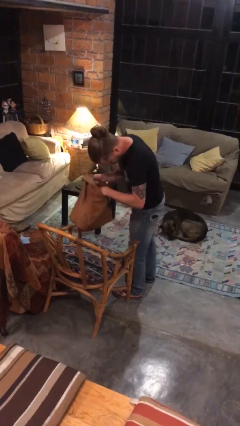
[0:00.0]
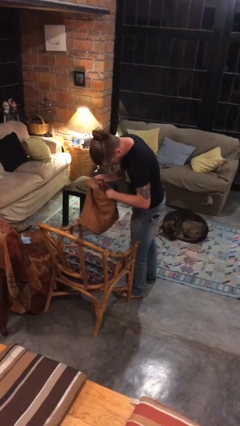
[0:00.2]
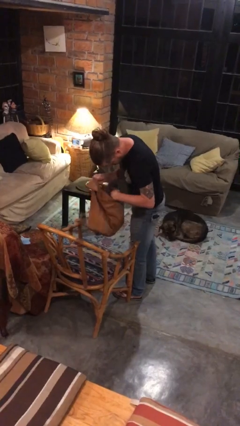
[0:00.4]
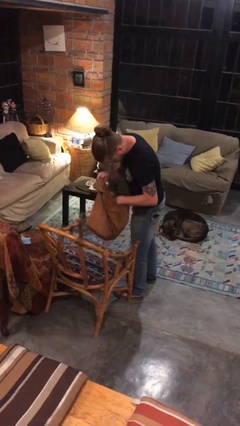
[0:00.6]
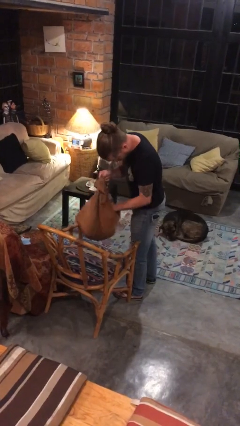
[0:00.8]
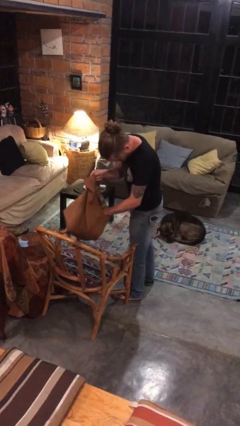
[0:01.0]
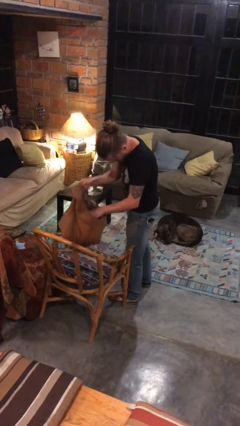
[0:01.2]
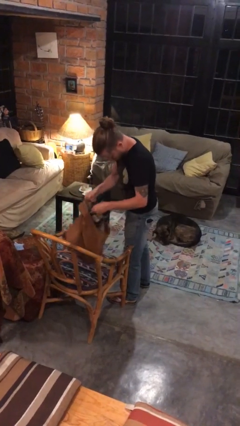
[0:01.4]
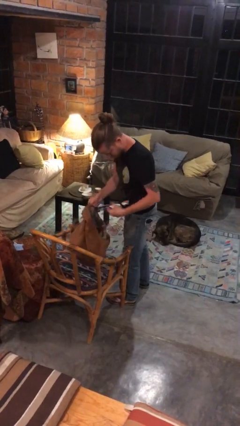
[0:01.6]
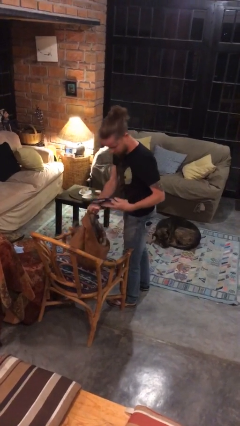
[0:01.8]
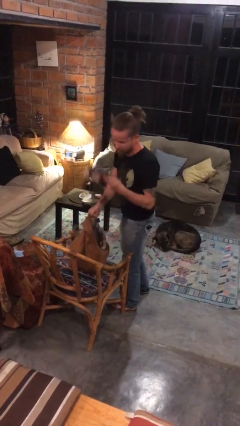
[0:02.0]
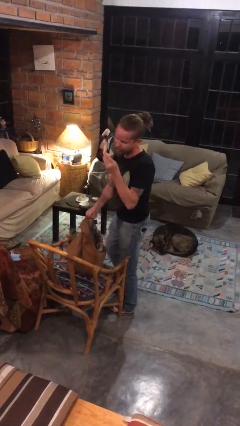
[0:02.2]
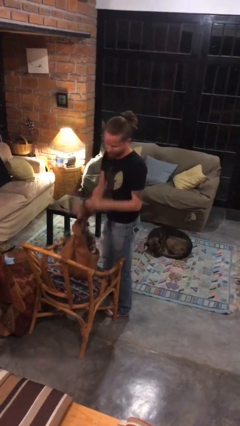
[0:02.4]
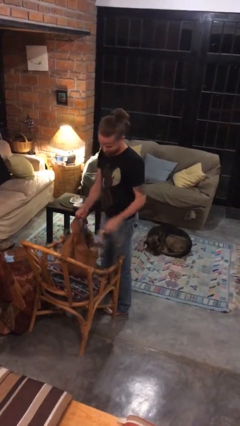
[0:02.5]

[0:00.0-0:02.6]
person takes object from purse

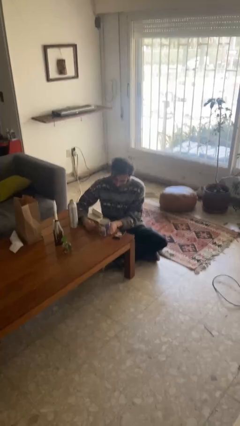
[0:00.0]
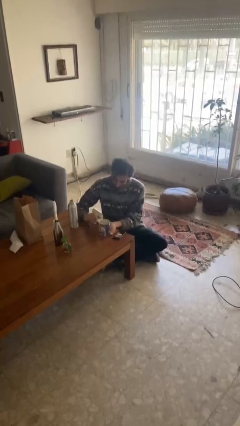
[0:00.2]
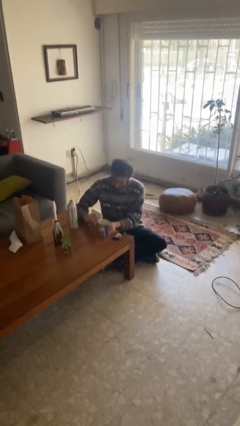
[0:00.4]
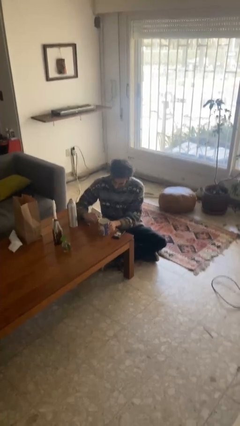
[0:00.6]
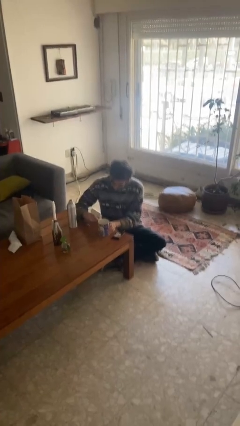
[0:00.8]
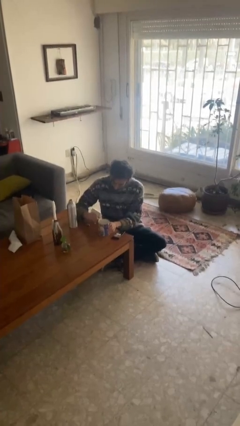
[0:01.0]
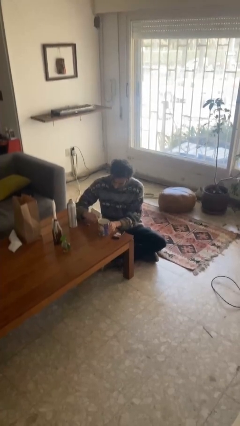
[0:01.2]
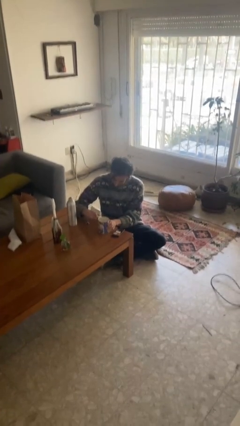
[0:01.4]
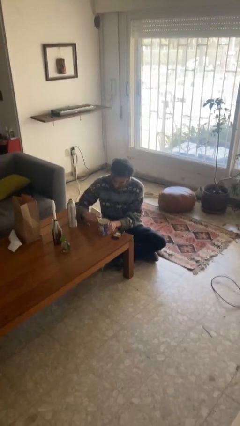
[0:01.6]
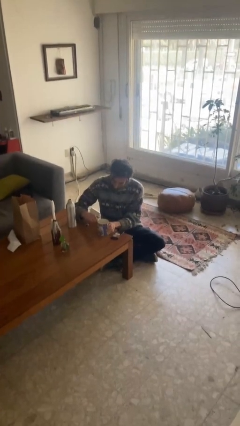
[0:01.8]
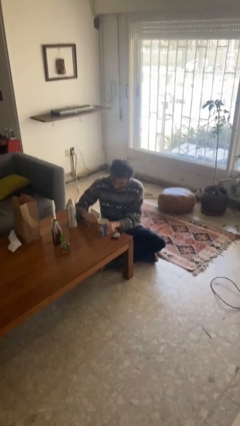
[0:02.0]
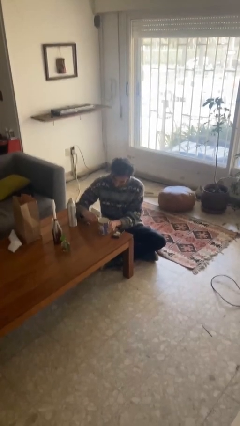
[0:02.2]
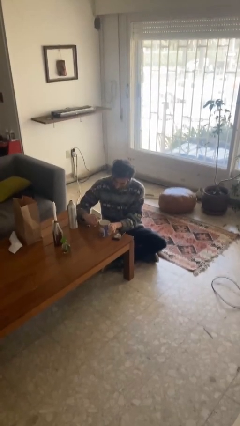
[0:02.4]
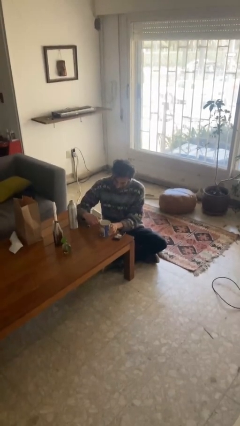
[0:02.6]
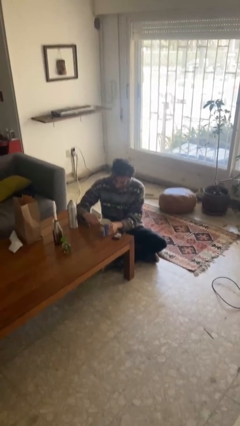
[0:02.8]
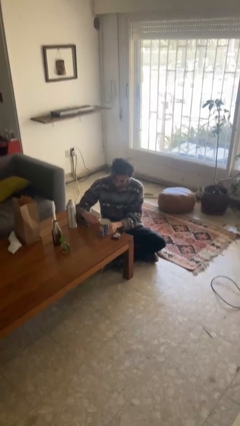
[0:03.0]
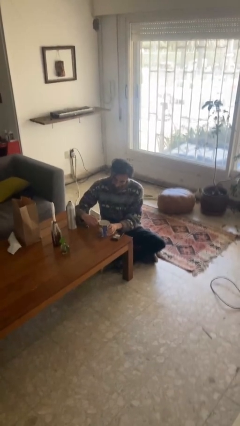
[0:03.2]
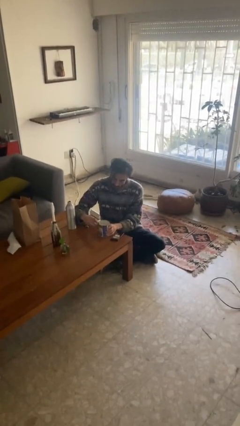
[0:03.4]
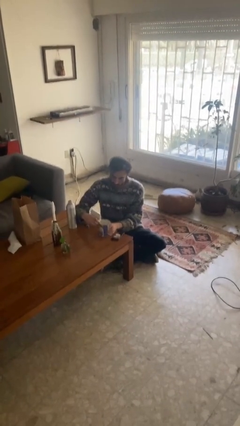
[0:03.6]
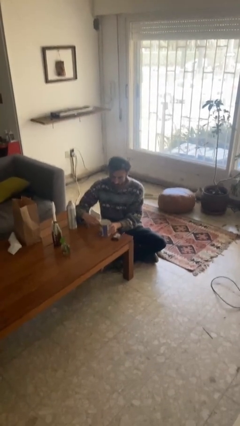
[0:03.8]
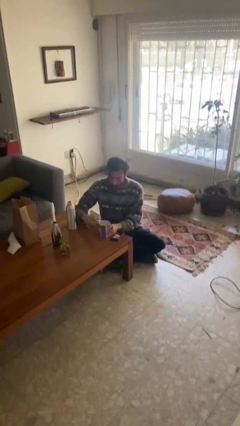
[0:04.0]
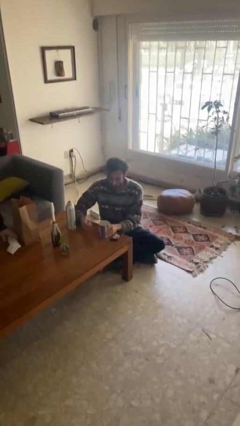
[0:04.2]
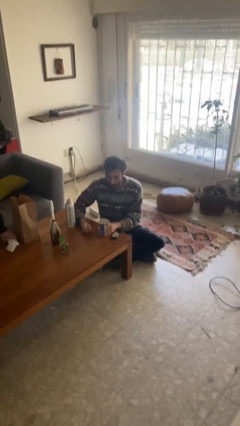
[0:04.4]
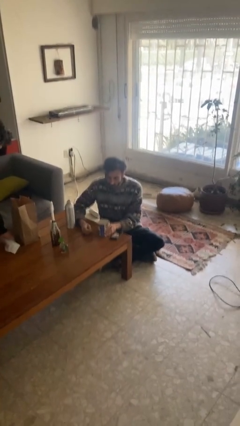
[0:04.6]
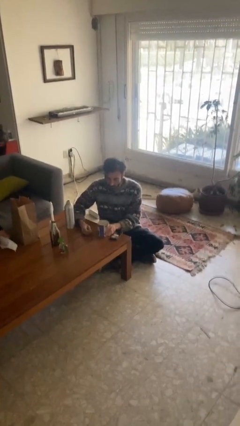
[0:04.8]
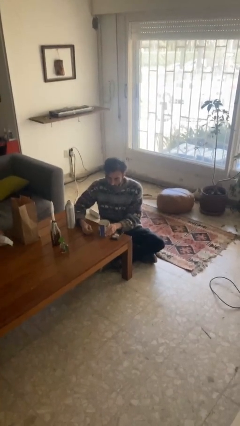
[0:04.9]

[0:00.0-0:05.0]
person opens can with can opener

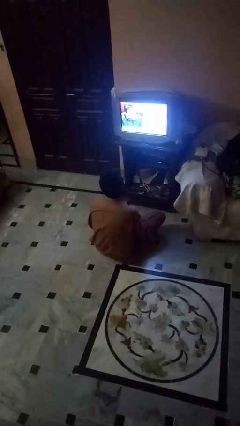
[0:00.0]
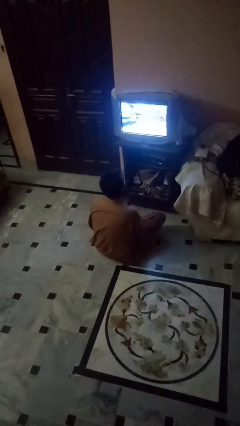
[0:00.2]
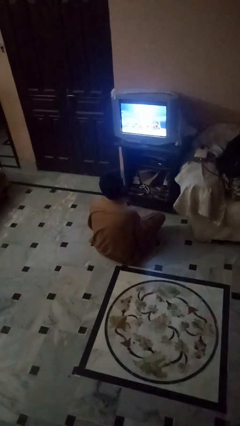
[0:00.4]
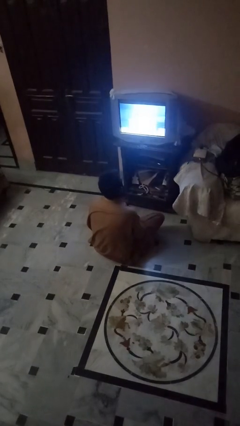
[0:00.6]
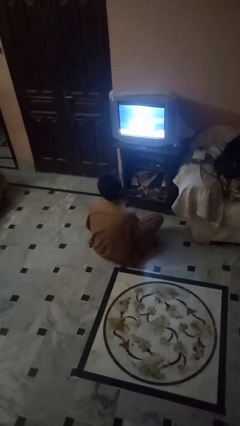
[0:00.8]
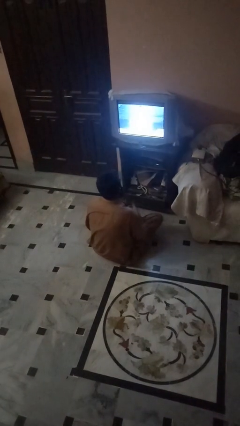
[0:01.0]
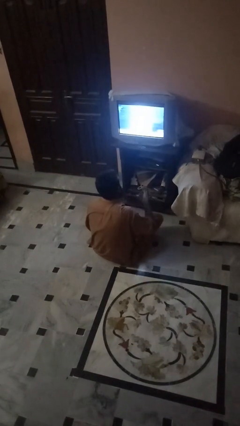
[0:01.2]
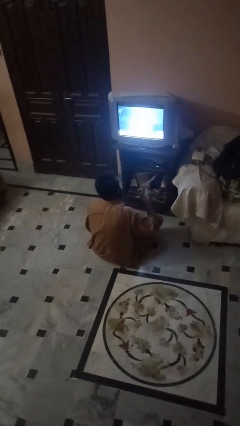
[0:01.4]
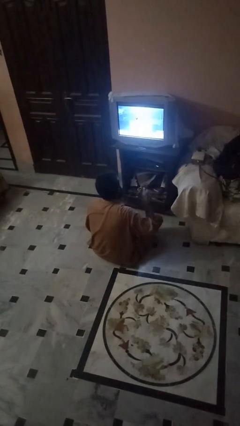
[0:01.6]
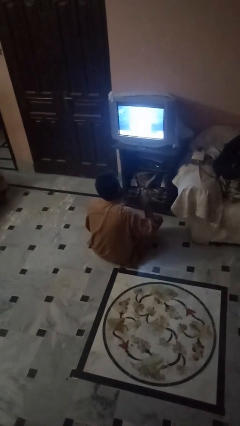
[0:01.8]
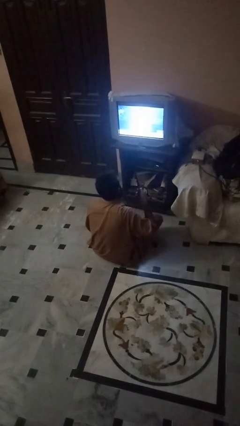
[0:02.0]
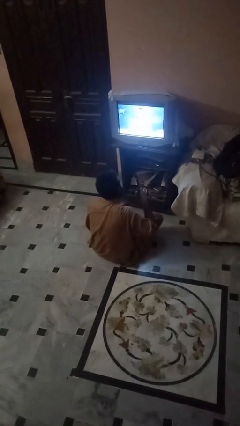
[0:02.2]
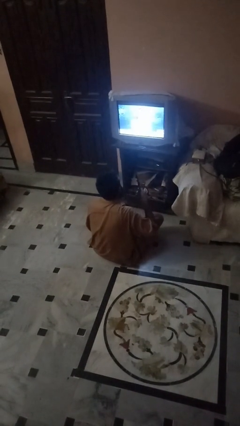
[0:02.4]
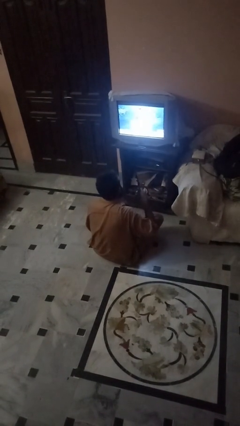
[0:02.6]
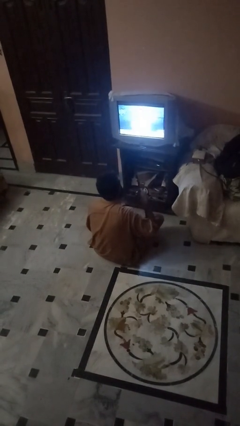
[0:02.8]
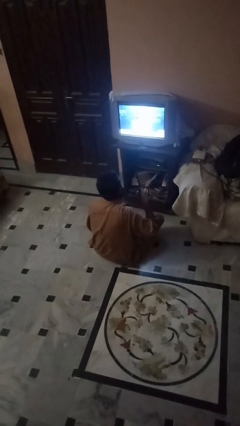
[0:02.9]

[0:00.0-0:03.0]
person uses television remote

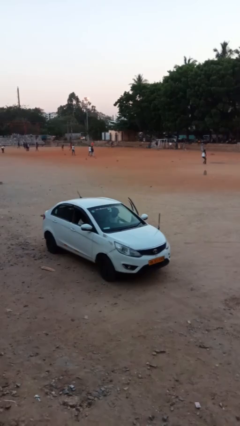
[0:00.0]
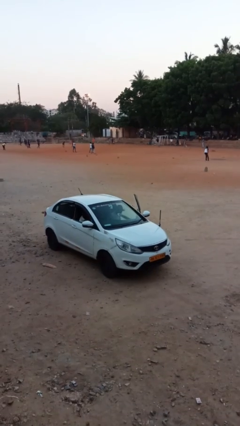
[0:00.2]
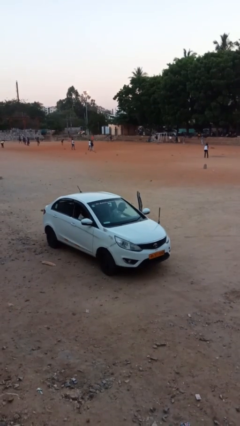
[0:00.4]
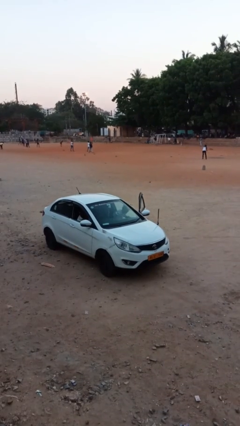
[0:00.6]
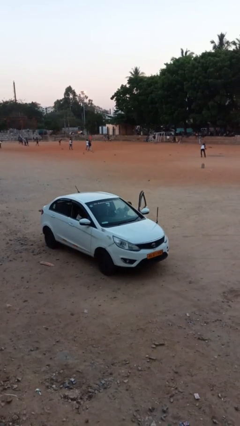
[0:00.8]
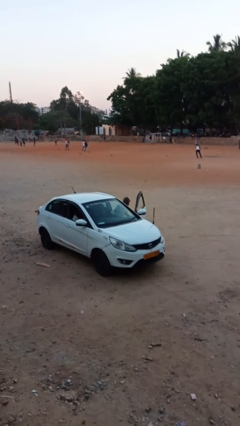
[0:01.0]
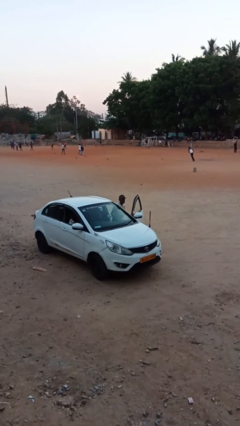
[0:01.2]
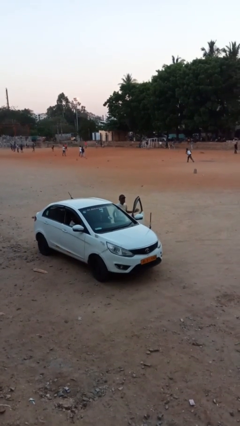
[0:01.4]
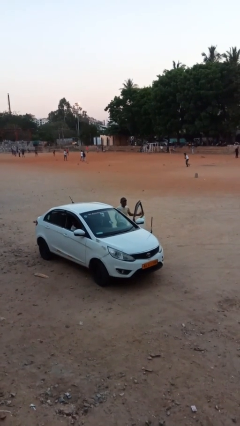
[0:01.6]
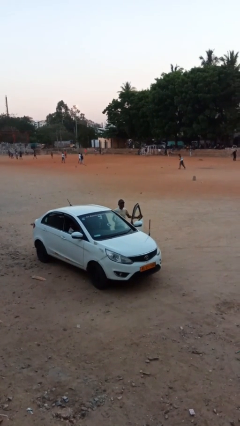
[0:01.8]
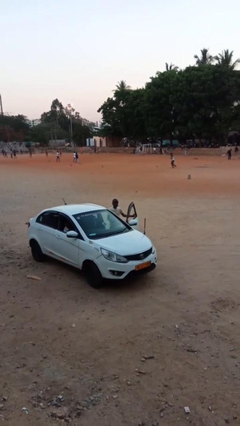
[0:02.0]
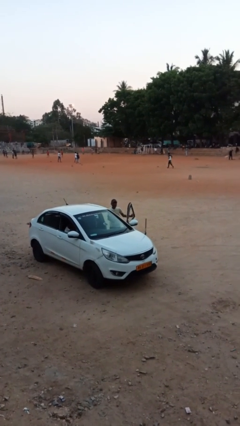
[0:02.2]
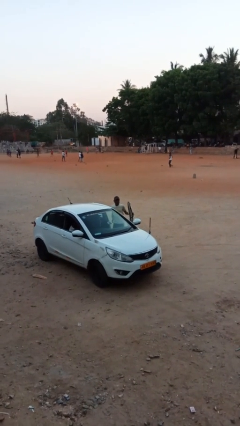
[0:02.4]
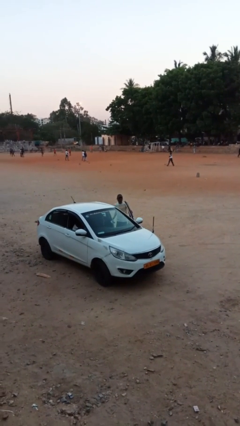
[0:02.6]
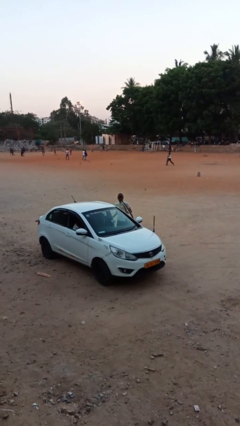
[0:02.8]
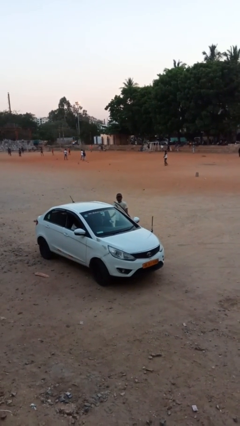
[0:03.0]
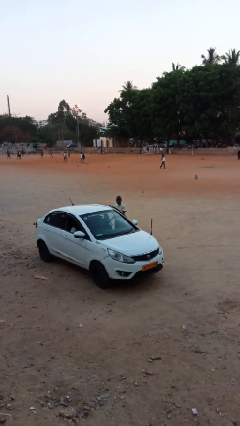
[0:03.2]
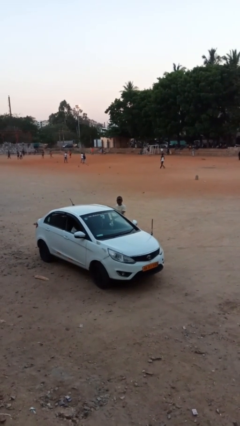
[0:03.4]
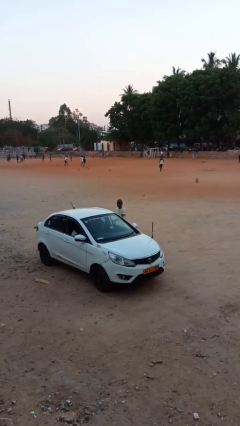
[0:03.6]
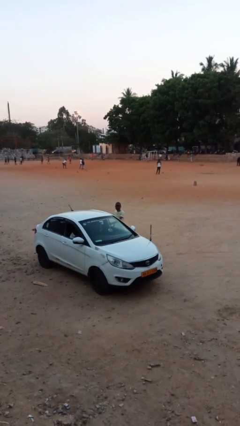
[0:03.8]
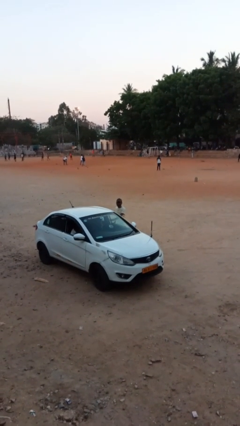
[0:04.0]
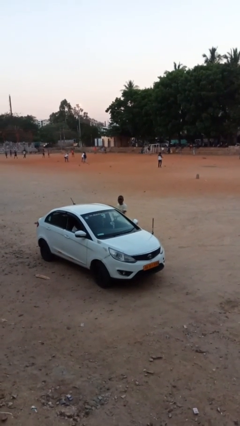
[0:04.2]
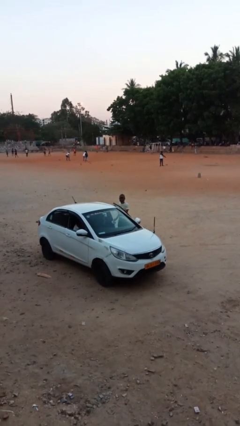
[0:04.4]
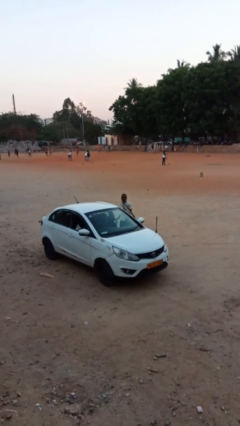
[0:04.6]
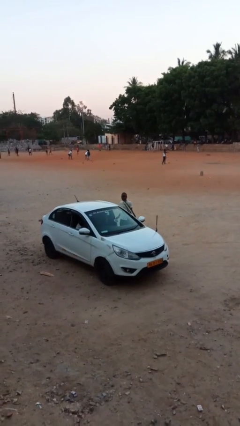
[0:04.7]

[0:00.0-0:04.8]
person exits car

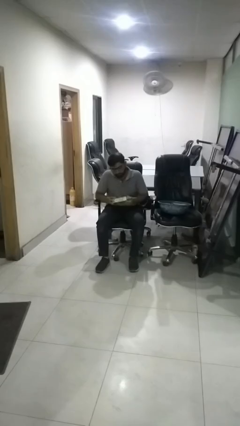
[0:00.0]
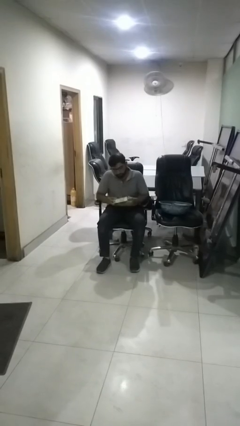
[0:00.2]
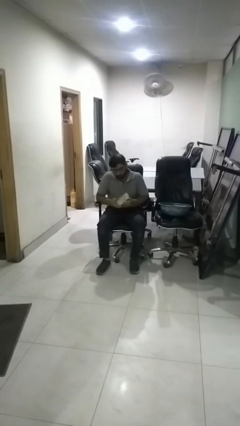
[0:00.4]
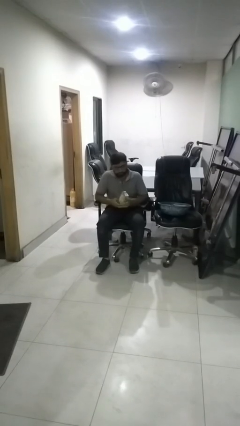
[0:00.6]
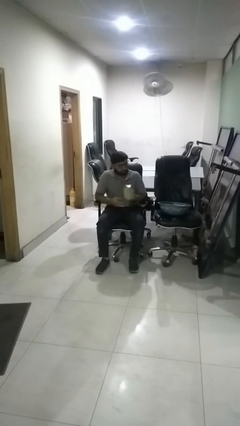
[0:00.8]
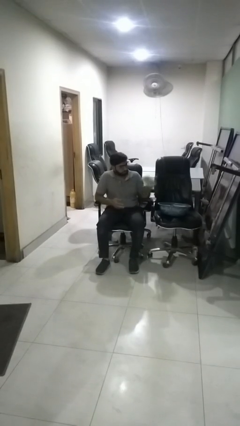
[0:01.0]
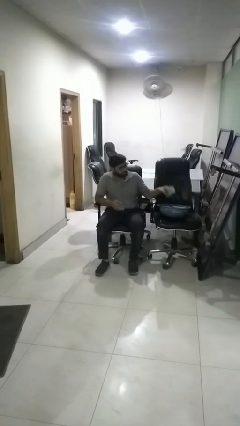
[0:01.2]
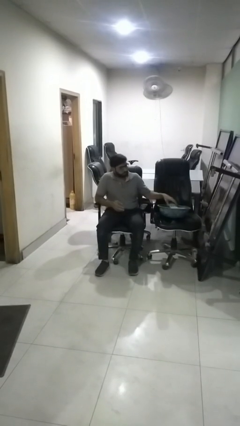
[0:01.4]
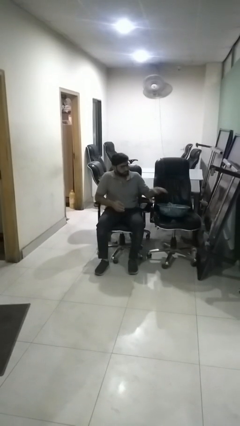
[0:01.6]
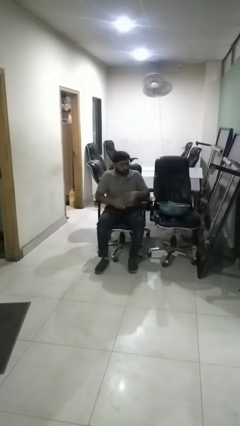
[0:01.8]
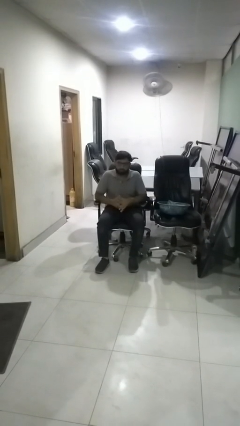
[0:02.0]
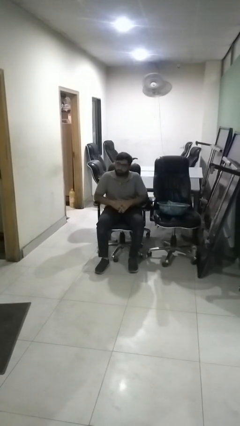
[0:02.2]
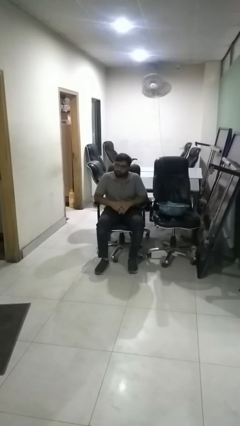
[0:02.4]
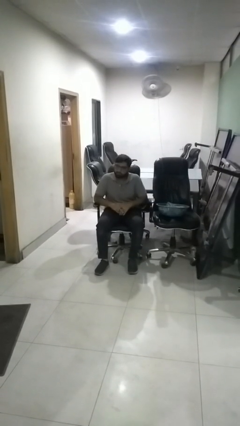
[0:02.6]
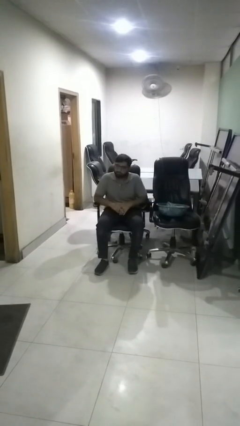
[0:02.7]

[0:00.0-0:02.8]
person puts object into basket
